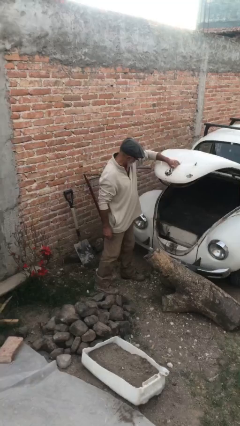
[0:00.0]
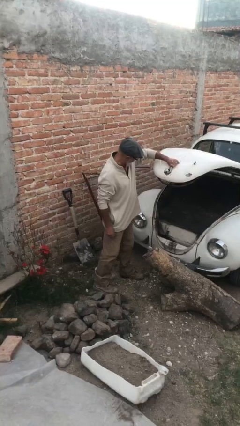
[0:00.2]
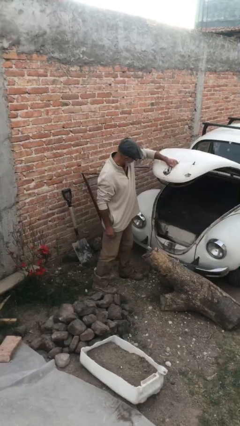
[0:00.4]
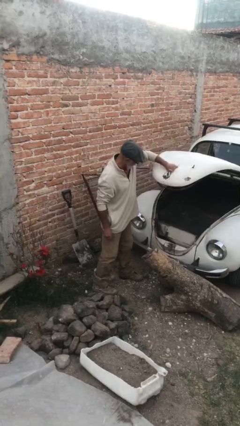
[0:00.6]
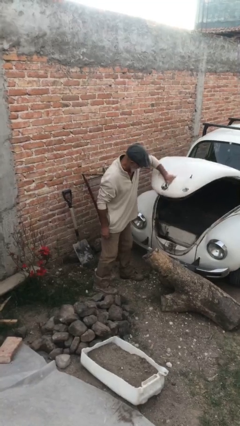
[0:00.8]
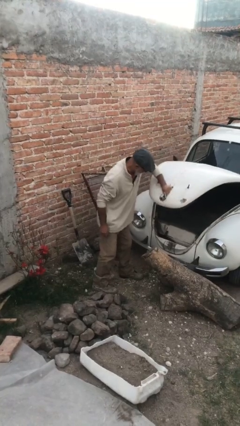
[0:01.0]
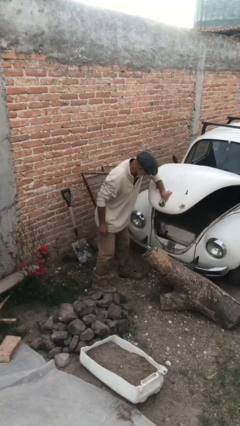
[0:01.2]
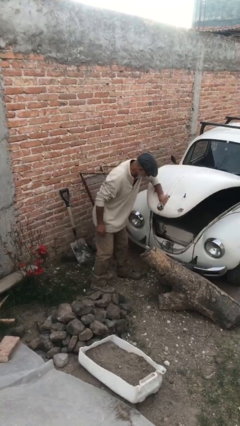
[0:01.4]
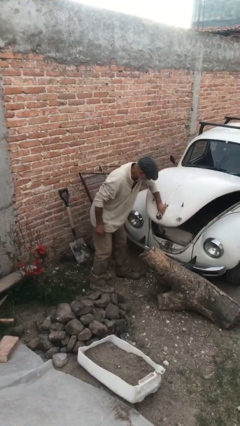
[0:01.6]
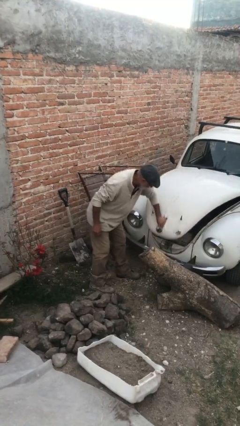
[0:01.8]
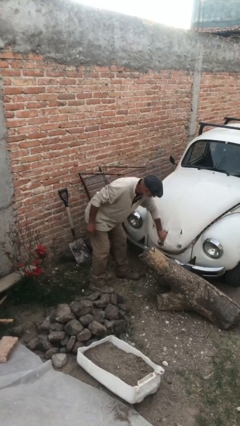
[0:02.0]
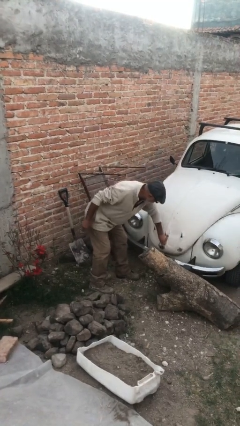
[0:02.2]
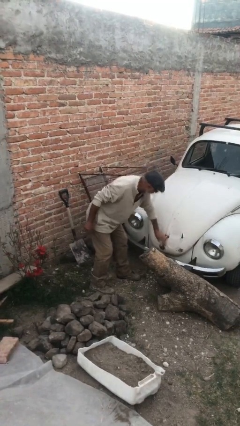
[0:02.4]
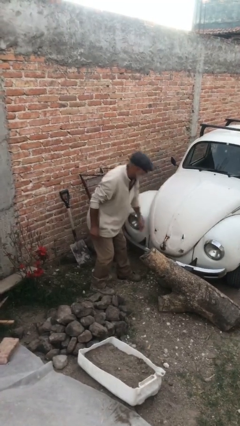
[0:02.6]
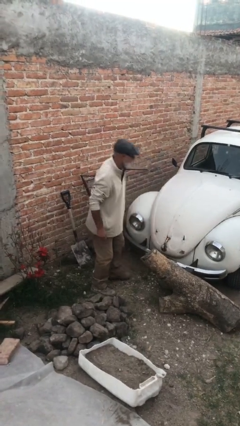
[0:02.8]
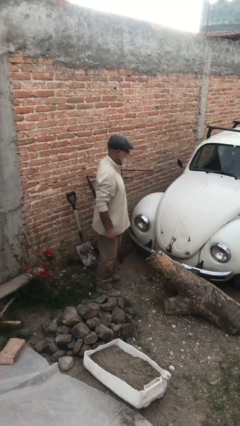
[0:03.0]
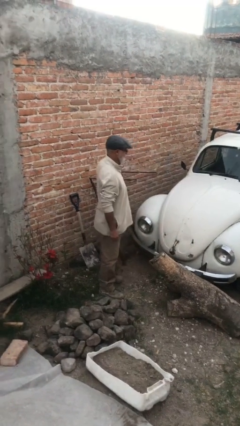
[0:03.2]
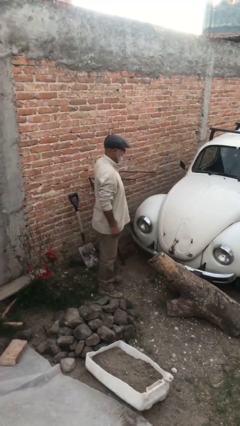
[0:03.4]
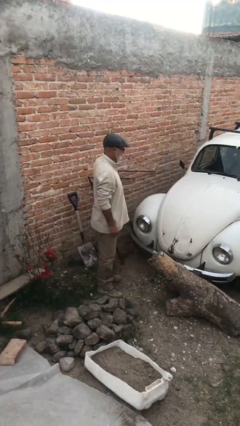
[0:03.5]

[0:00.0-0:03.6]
person closes car trunk

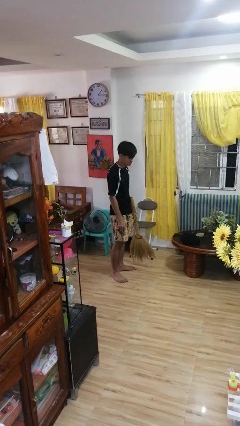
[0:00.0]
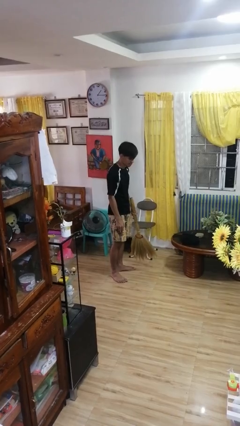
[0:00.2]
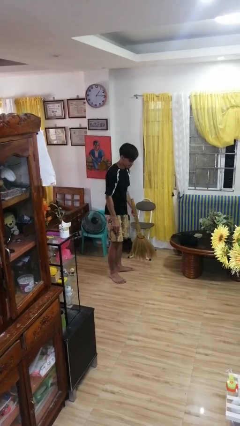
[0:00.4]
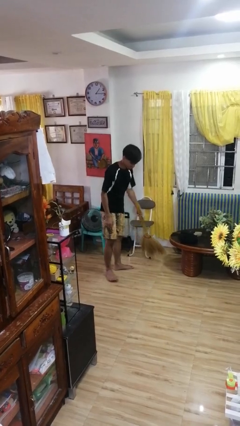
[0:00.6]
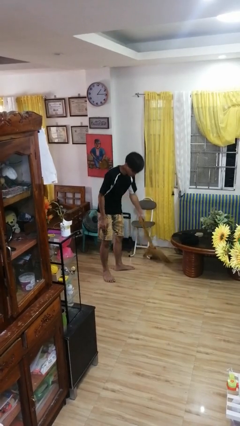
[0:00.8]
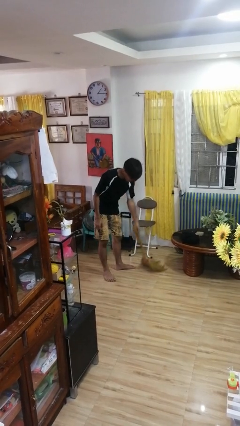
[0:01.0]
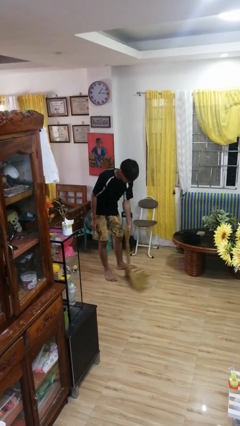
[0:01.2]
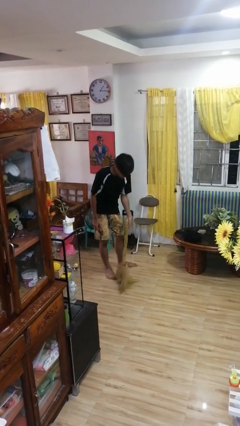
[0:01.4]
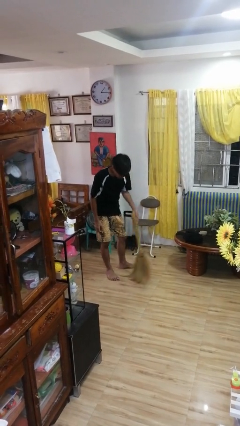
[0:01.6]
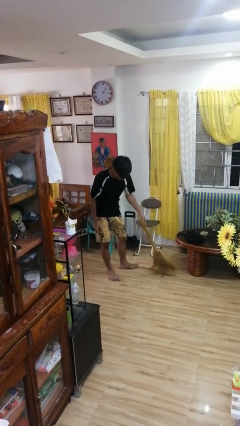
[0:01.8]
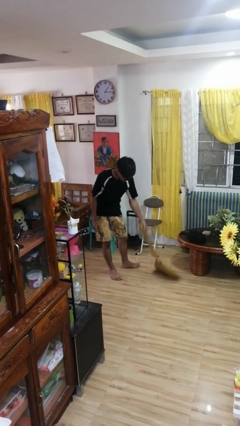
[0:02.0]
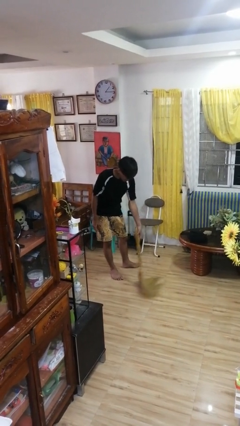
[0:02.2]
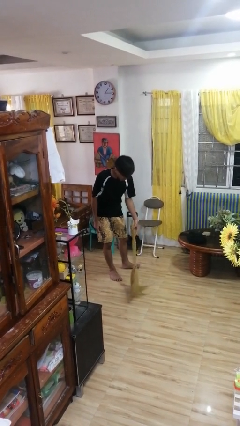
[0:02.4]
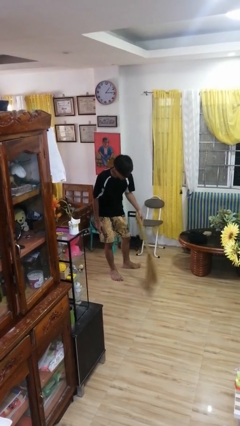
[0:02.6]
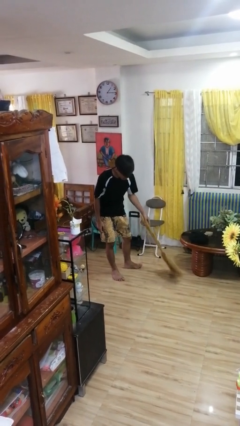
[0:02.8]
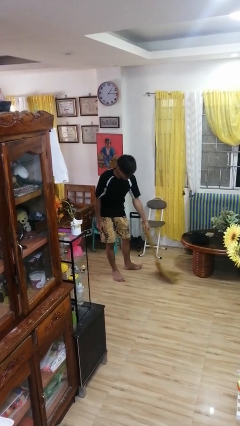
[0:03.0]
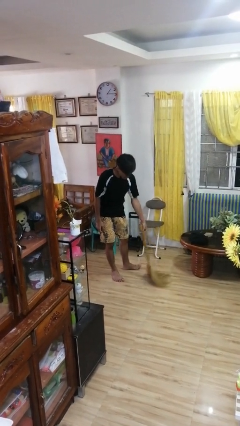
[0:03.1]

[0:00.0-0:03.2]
person sweeps floor

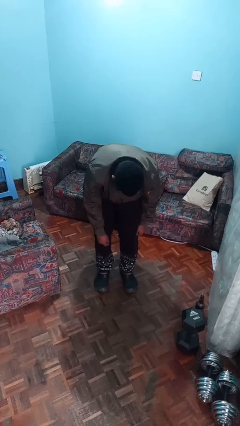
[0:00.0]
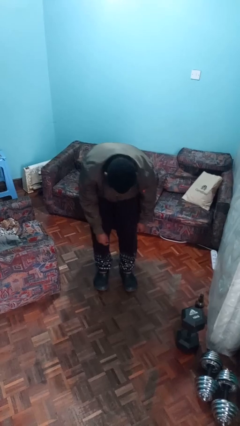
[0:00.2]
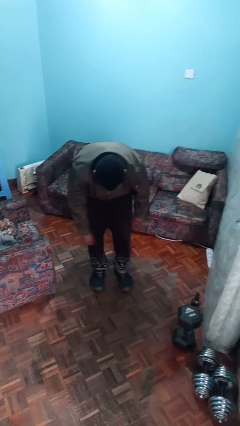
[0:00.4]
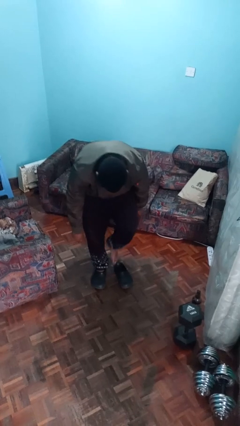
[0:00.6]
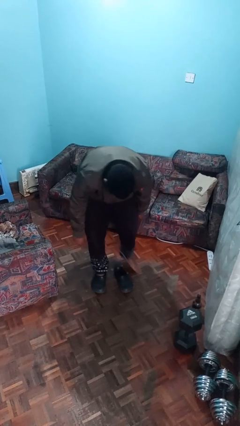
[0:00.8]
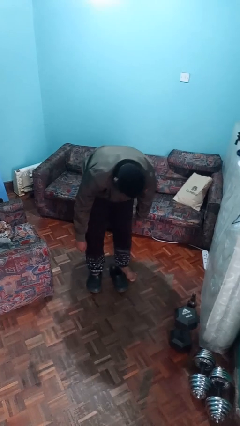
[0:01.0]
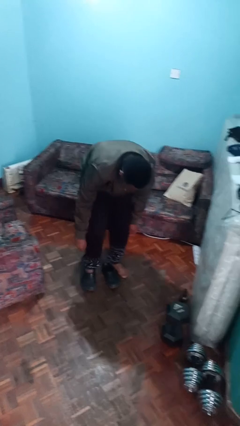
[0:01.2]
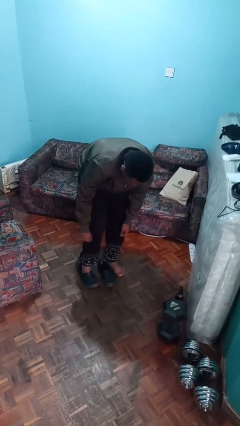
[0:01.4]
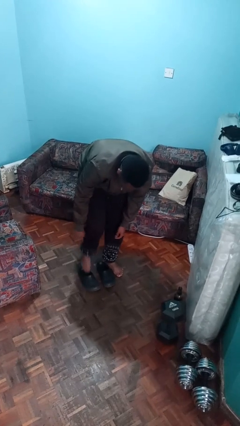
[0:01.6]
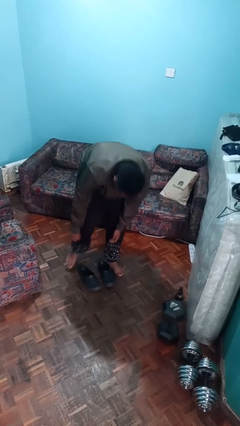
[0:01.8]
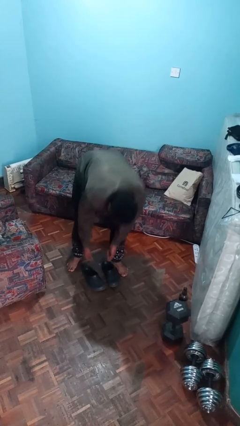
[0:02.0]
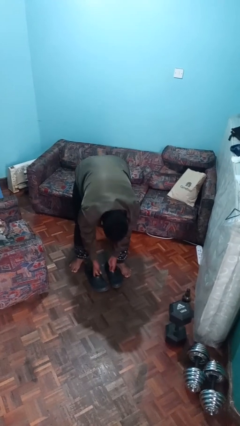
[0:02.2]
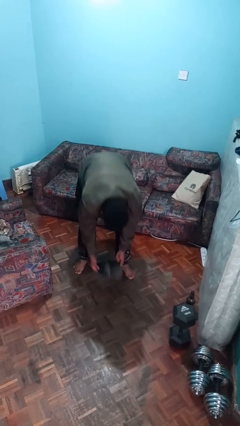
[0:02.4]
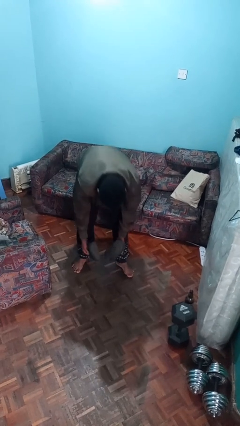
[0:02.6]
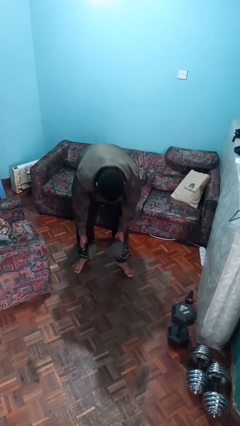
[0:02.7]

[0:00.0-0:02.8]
person takes off shoes

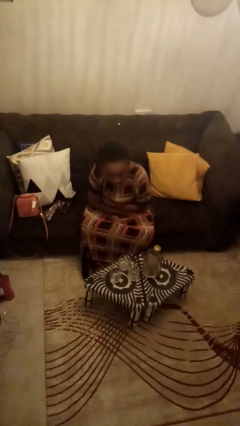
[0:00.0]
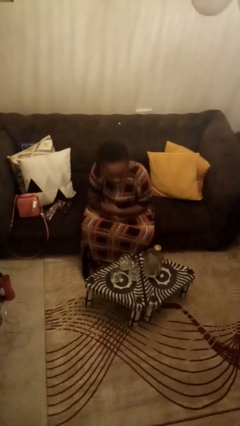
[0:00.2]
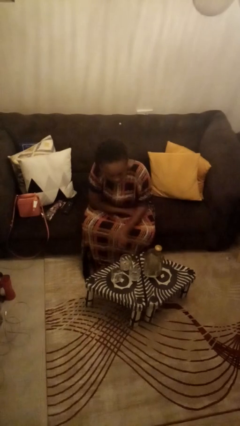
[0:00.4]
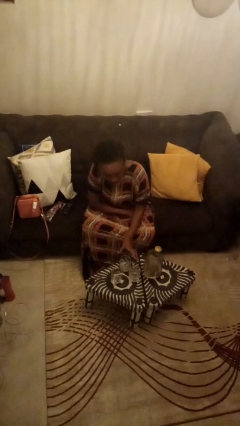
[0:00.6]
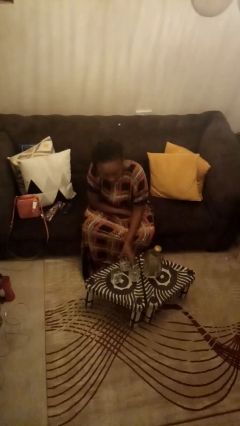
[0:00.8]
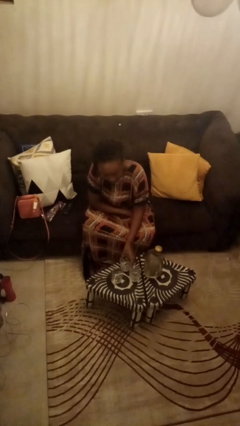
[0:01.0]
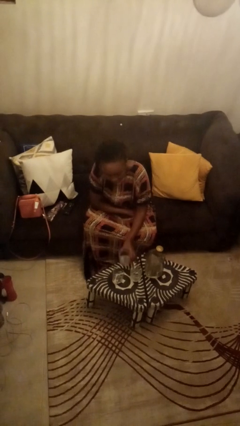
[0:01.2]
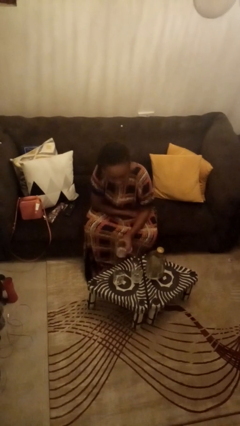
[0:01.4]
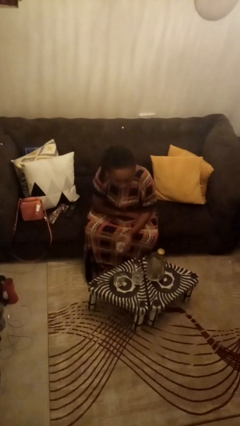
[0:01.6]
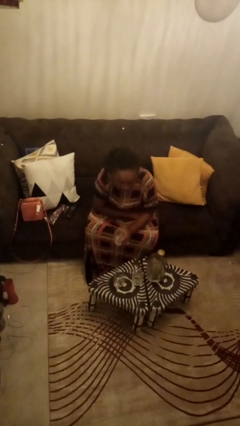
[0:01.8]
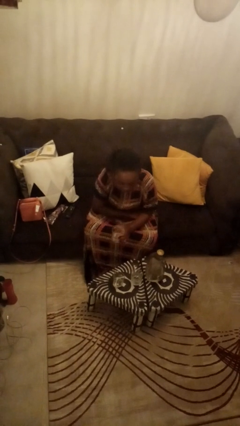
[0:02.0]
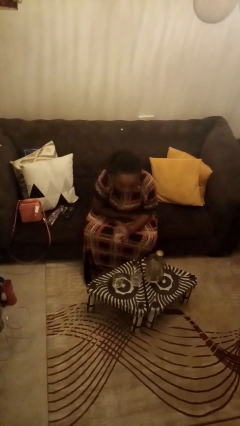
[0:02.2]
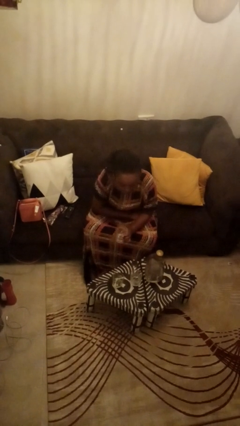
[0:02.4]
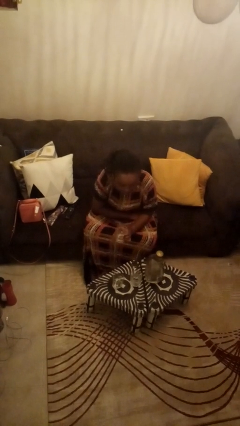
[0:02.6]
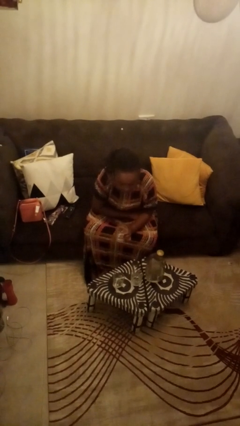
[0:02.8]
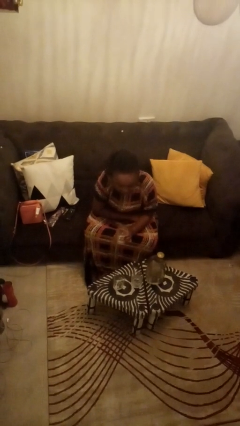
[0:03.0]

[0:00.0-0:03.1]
person picks up object from table

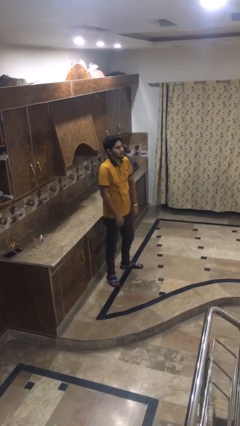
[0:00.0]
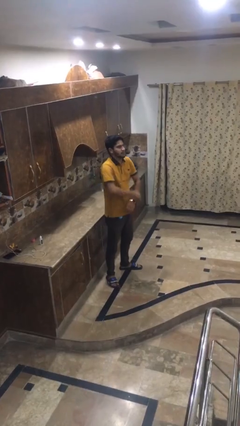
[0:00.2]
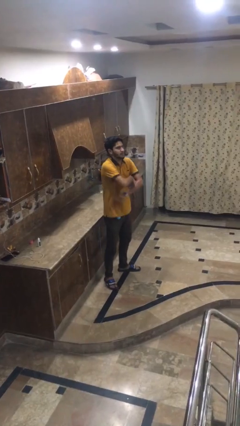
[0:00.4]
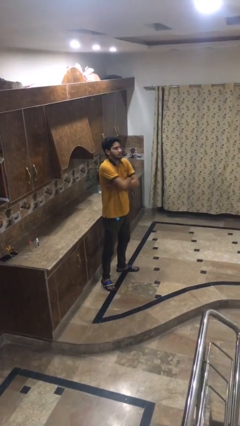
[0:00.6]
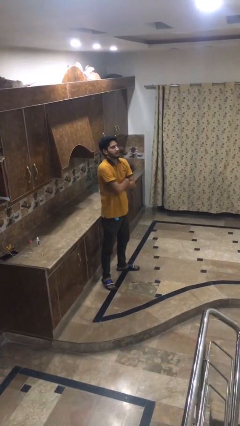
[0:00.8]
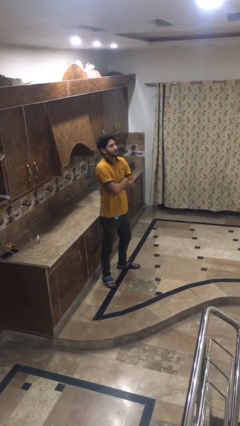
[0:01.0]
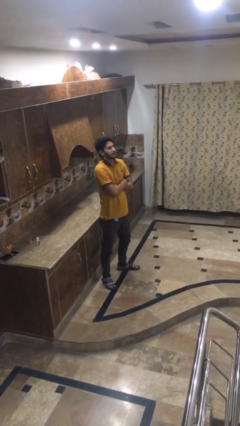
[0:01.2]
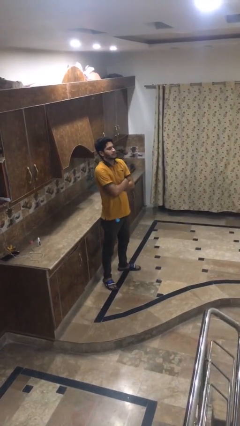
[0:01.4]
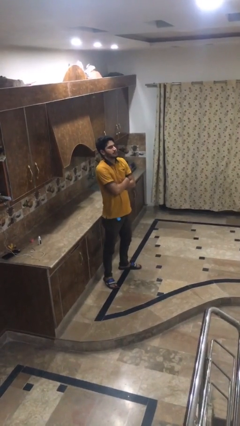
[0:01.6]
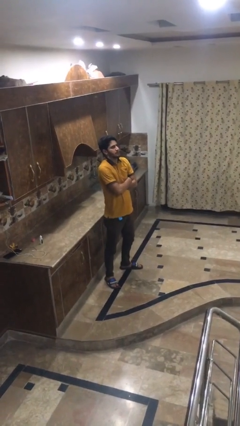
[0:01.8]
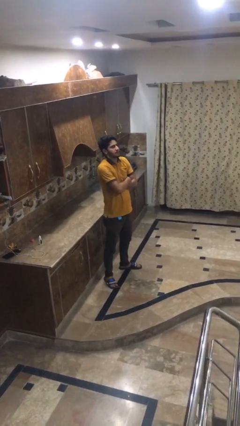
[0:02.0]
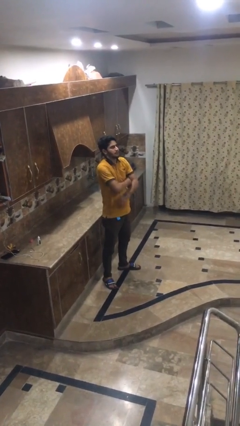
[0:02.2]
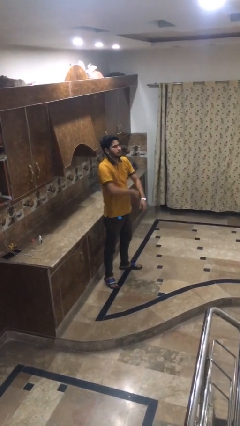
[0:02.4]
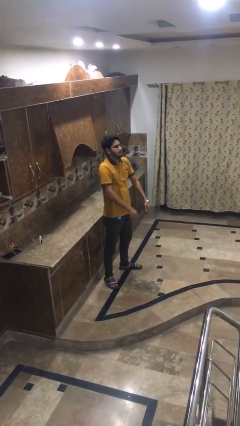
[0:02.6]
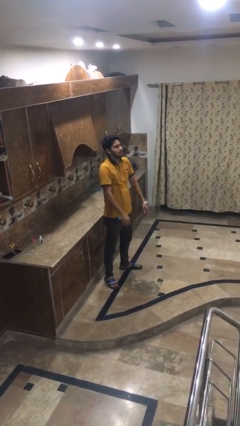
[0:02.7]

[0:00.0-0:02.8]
person crosses arms

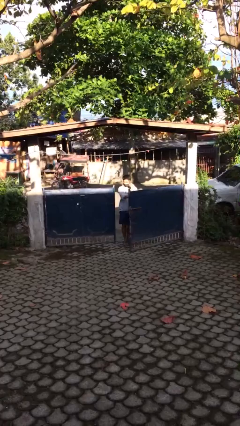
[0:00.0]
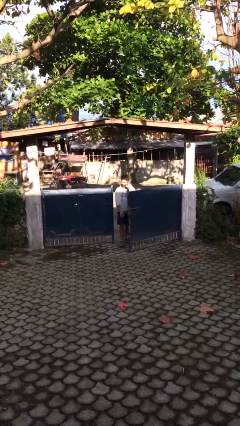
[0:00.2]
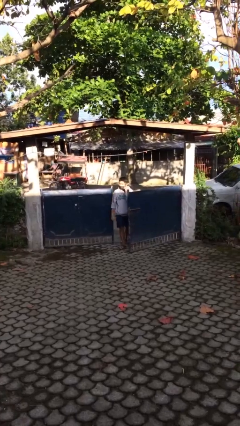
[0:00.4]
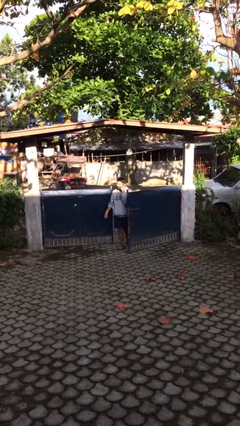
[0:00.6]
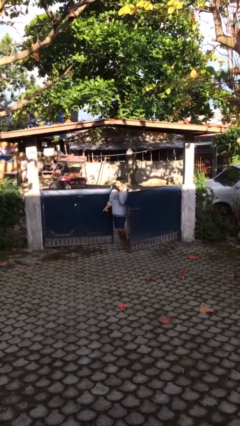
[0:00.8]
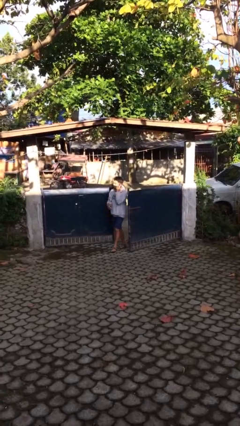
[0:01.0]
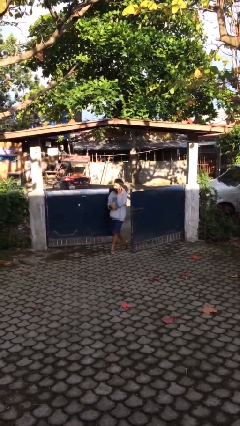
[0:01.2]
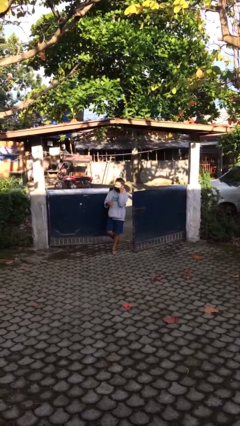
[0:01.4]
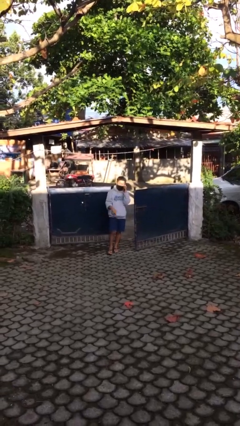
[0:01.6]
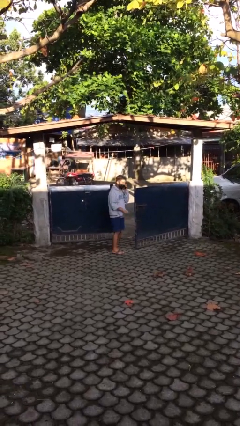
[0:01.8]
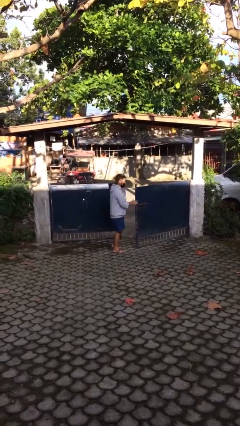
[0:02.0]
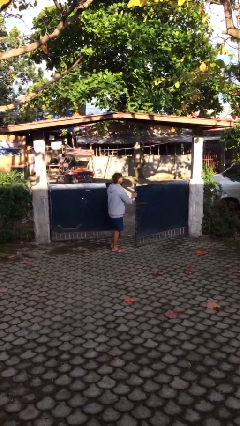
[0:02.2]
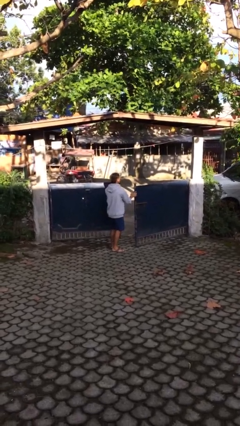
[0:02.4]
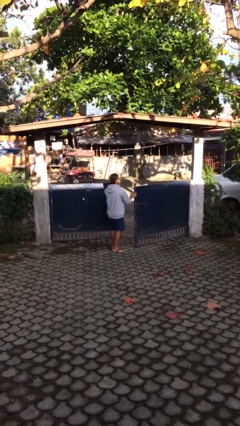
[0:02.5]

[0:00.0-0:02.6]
person enters scene through structure
